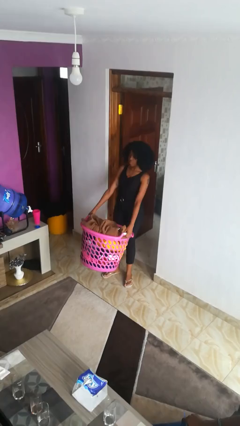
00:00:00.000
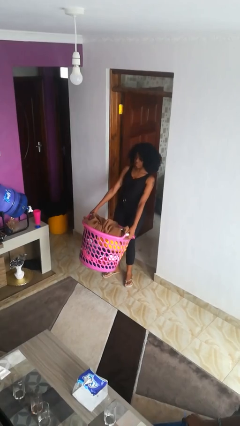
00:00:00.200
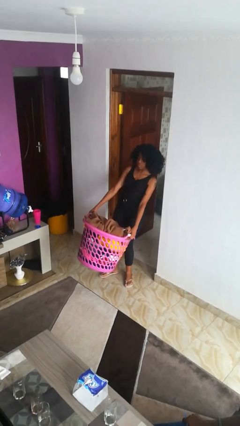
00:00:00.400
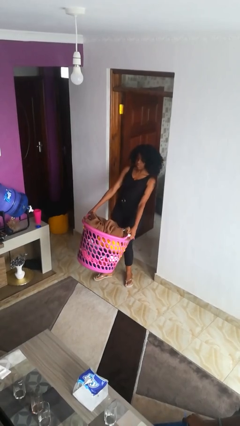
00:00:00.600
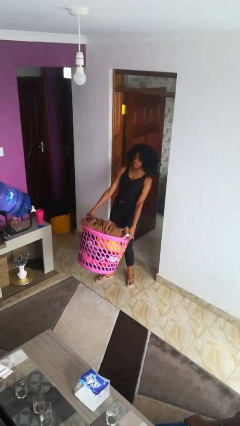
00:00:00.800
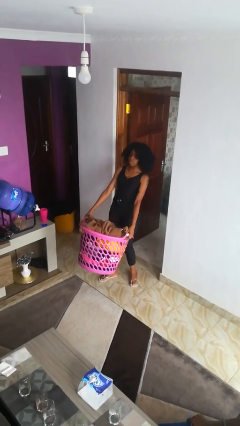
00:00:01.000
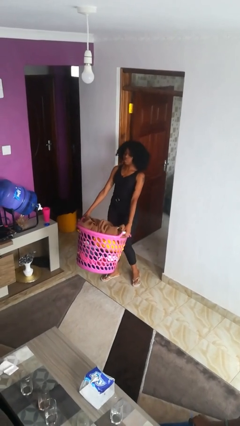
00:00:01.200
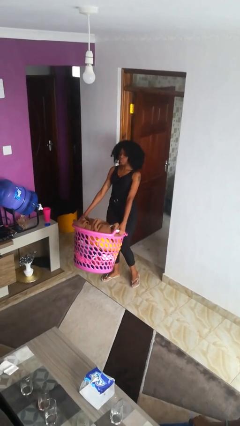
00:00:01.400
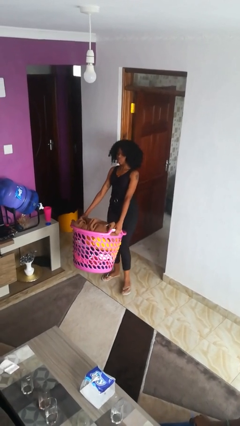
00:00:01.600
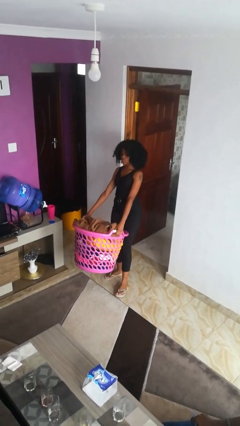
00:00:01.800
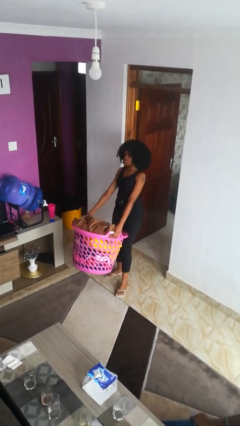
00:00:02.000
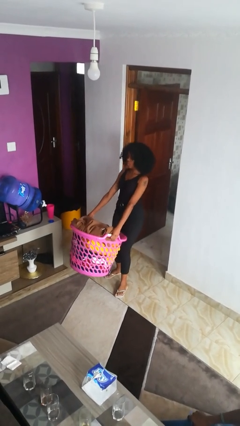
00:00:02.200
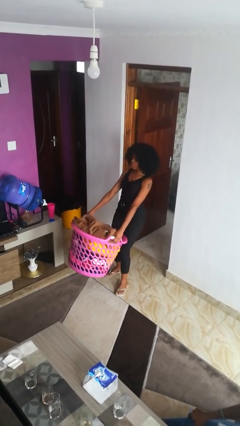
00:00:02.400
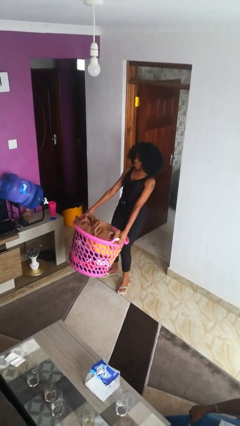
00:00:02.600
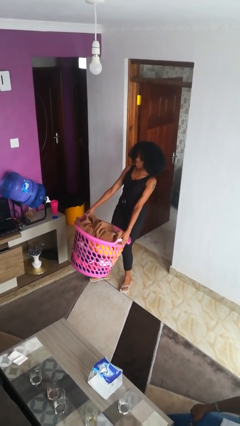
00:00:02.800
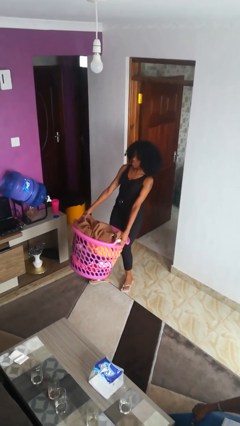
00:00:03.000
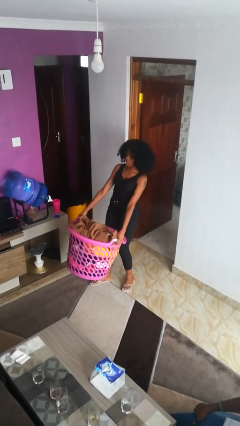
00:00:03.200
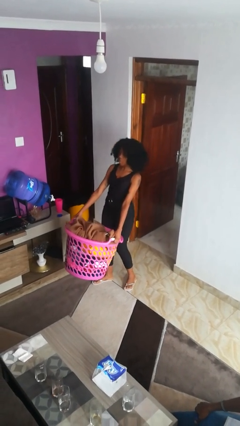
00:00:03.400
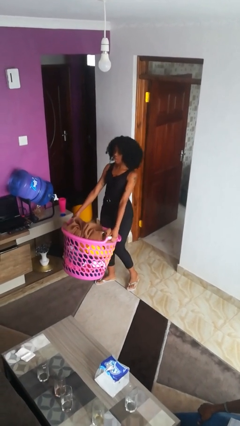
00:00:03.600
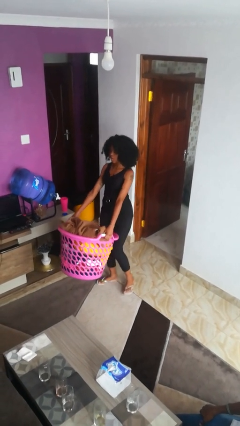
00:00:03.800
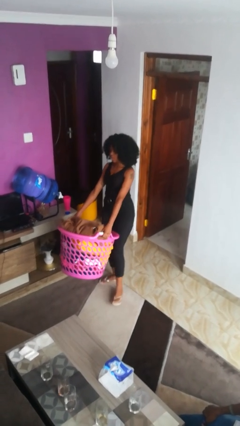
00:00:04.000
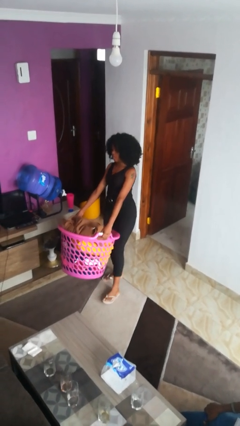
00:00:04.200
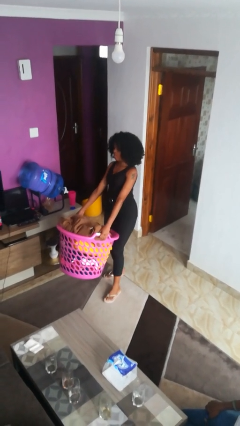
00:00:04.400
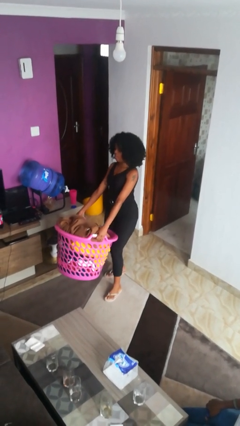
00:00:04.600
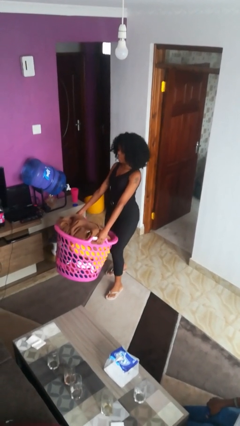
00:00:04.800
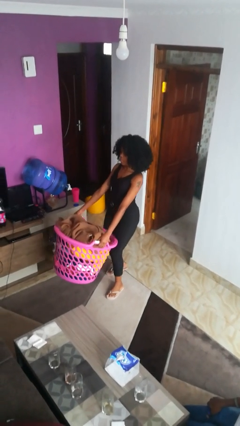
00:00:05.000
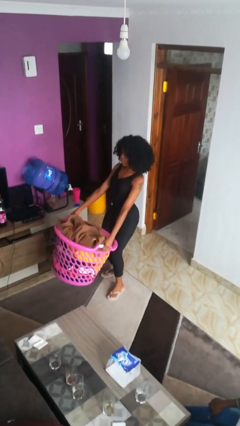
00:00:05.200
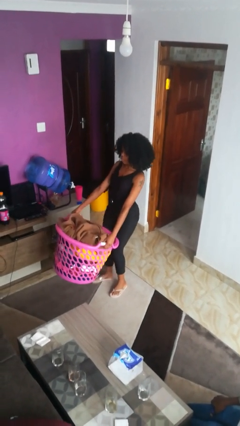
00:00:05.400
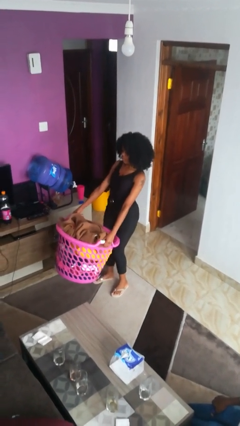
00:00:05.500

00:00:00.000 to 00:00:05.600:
person carries laundry basket

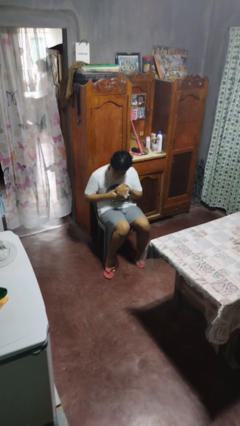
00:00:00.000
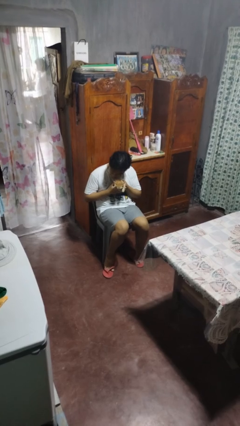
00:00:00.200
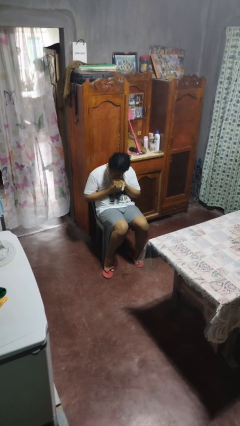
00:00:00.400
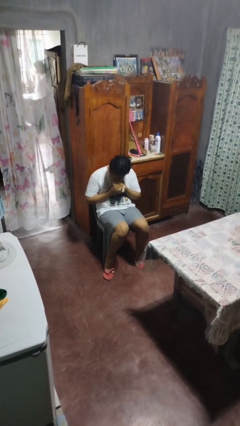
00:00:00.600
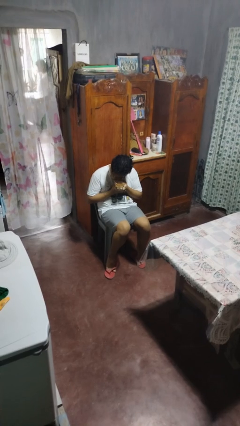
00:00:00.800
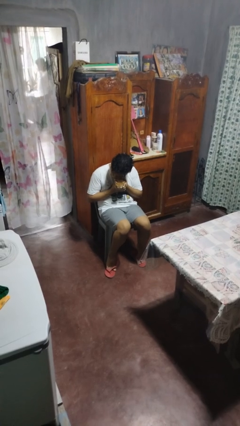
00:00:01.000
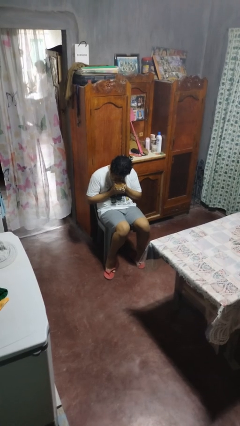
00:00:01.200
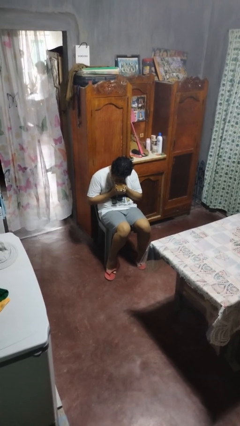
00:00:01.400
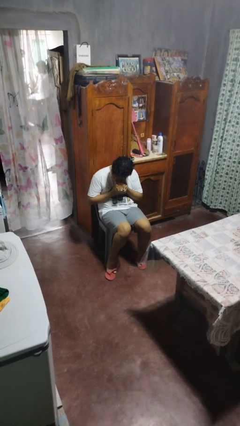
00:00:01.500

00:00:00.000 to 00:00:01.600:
person hugs cat

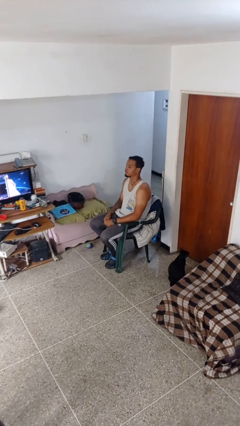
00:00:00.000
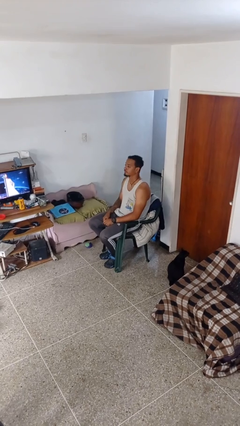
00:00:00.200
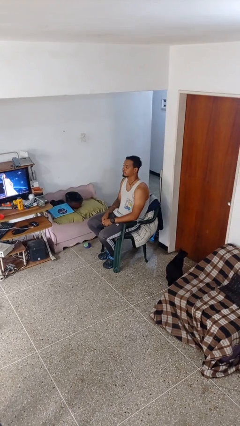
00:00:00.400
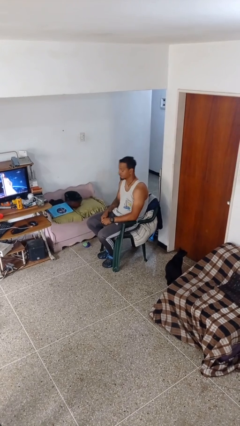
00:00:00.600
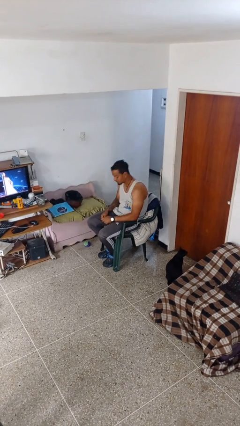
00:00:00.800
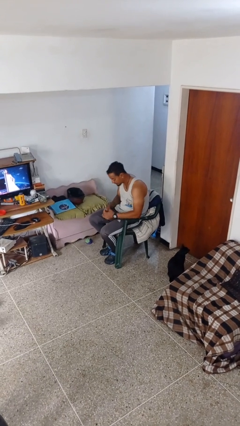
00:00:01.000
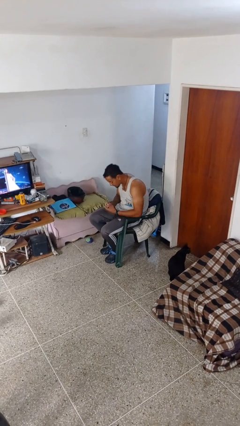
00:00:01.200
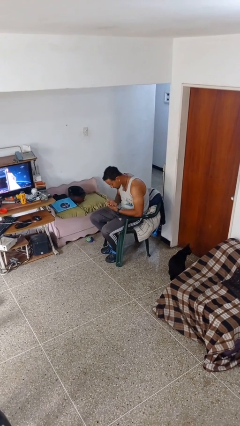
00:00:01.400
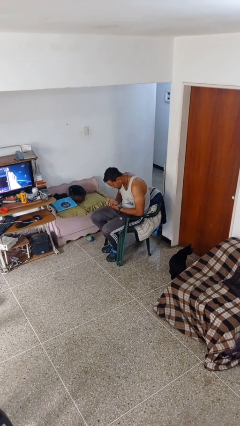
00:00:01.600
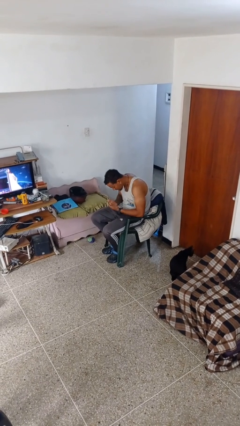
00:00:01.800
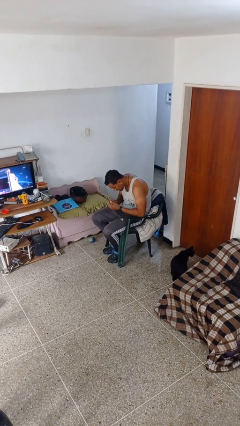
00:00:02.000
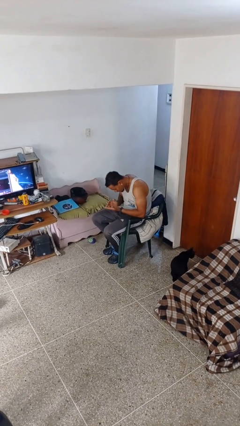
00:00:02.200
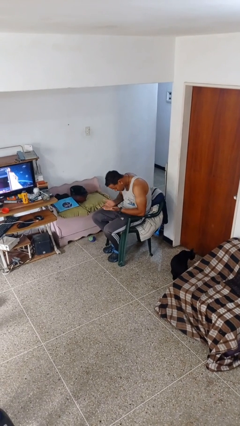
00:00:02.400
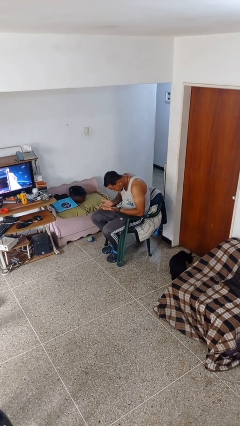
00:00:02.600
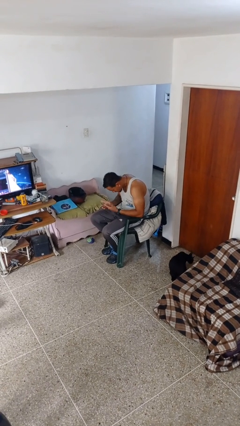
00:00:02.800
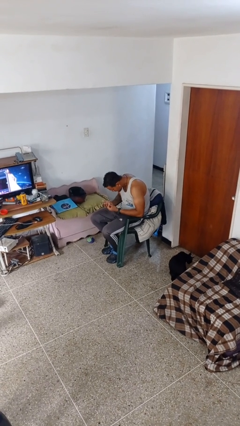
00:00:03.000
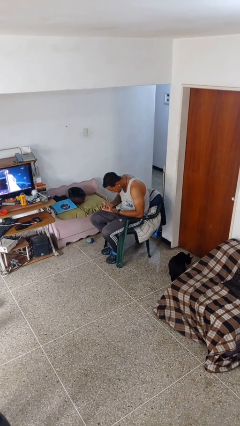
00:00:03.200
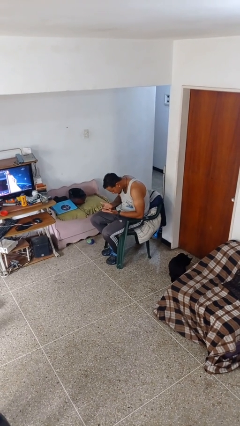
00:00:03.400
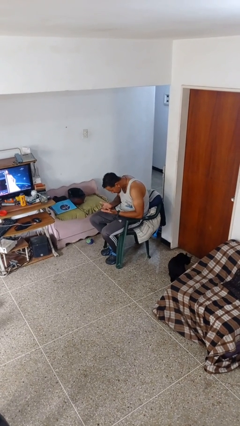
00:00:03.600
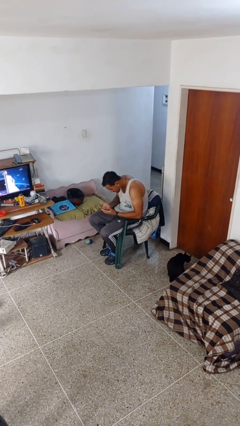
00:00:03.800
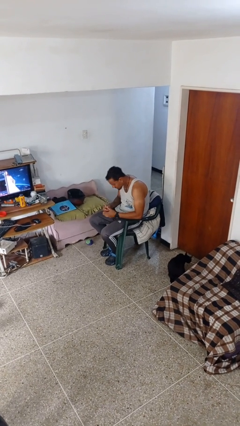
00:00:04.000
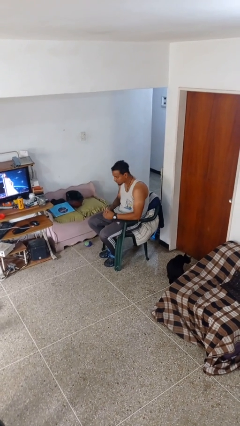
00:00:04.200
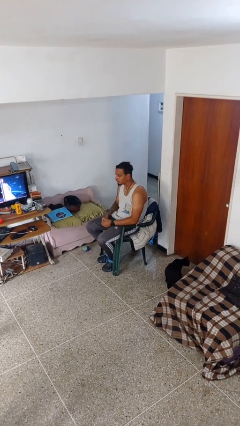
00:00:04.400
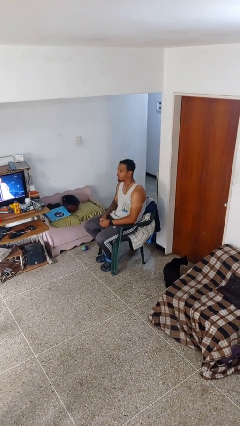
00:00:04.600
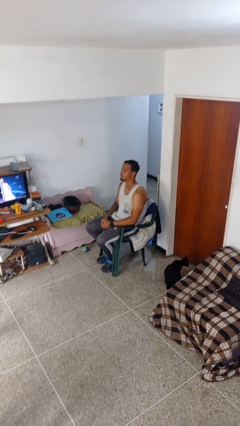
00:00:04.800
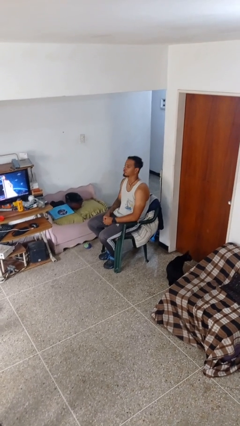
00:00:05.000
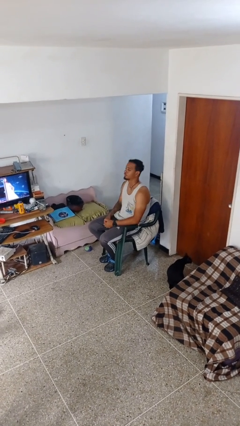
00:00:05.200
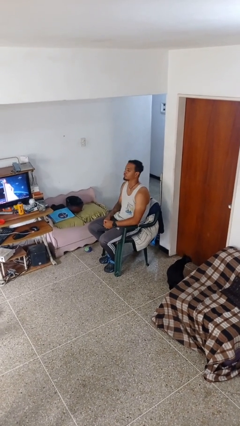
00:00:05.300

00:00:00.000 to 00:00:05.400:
person looks at hands in lap

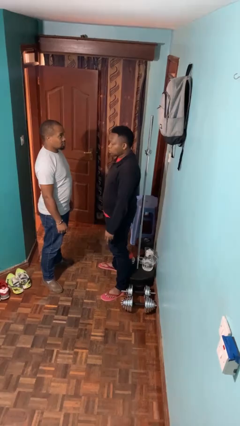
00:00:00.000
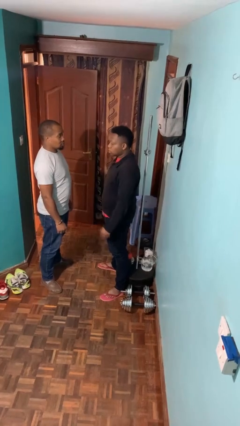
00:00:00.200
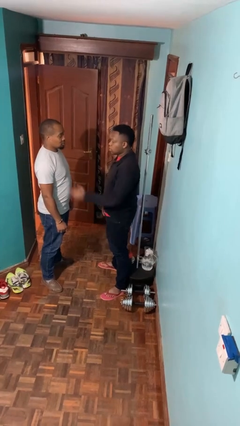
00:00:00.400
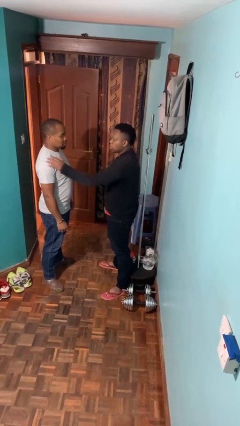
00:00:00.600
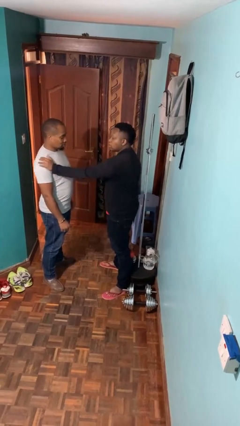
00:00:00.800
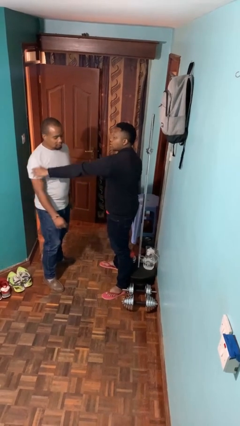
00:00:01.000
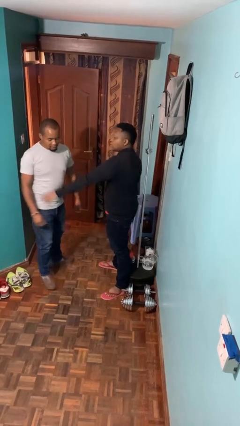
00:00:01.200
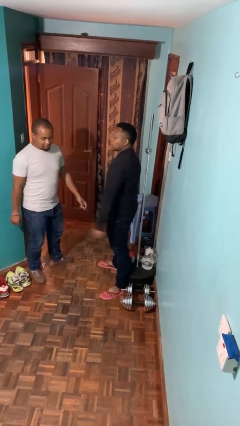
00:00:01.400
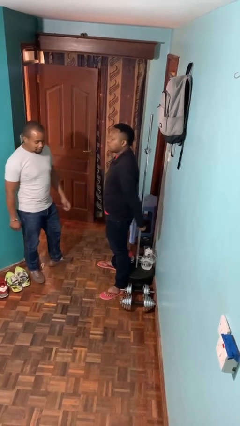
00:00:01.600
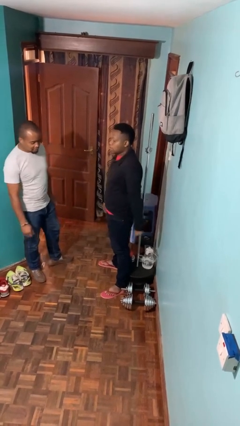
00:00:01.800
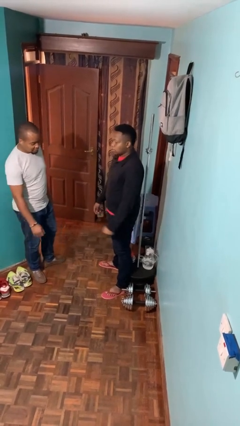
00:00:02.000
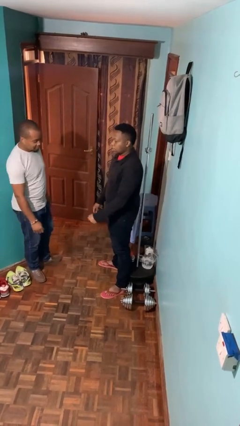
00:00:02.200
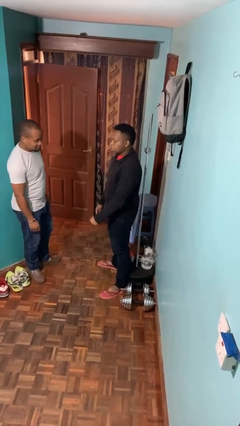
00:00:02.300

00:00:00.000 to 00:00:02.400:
person shoves person

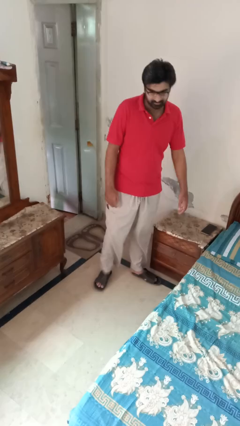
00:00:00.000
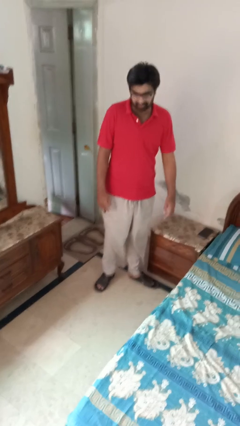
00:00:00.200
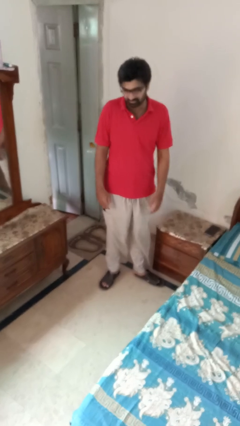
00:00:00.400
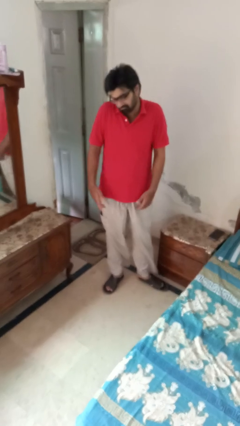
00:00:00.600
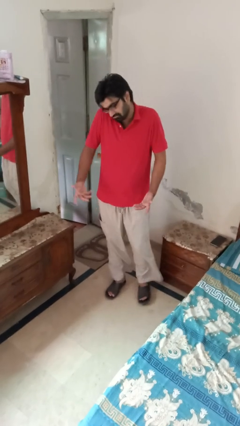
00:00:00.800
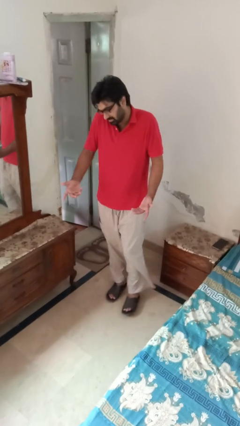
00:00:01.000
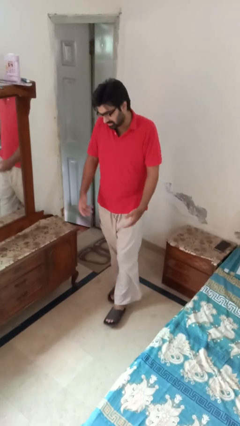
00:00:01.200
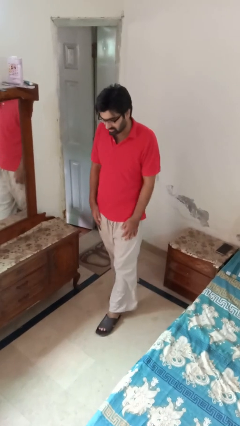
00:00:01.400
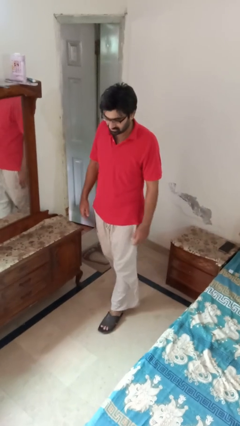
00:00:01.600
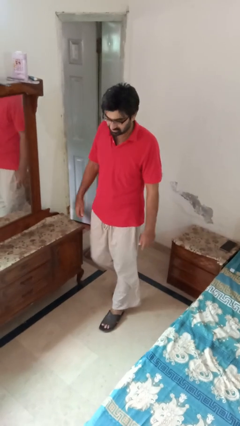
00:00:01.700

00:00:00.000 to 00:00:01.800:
person shrugs

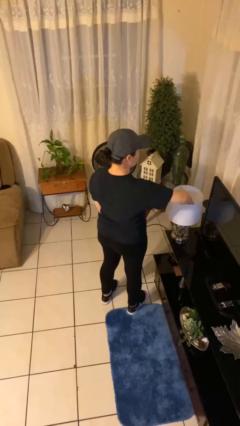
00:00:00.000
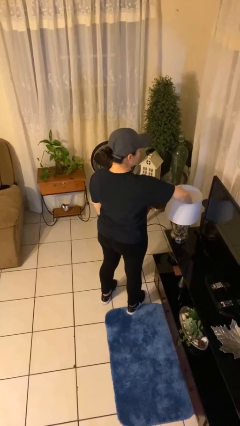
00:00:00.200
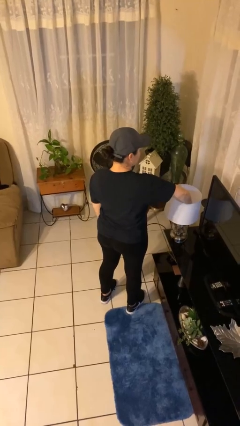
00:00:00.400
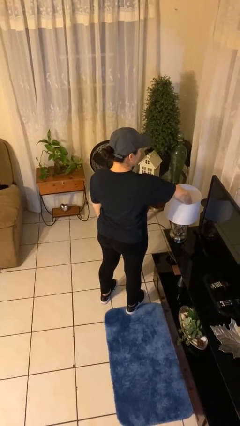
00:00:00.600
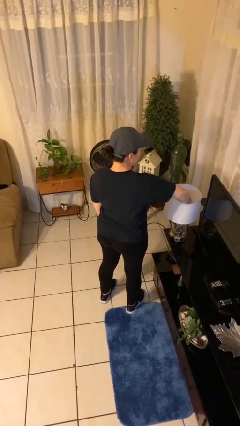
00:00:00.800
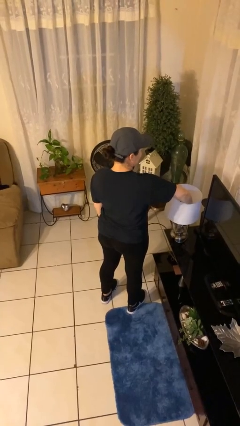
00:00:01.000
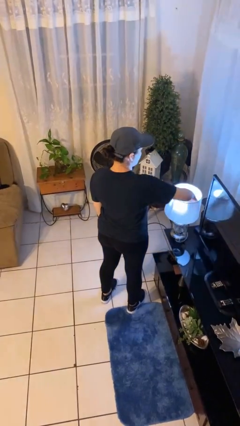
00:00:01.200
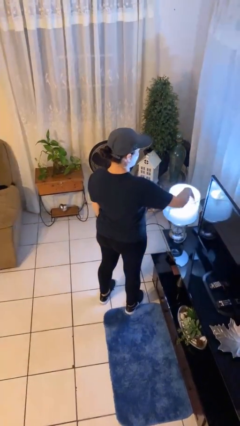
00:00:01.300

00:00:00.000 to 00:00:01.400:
person turns on lamp
